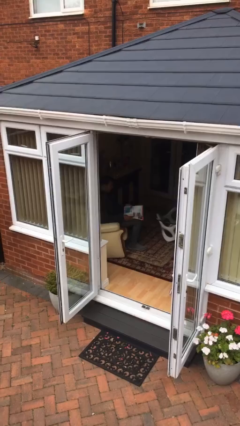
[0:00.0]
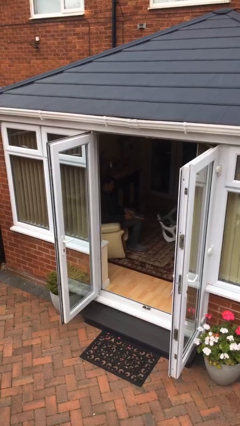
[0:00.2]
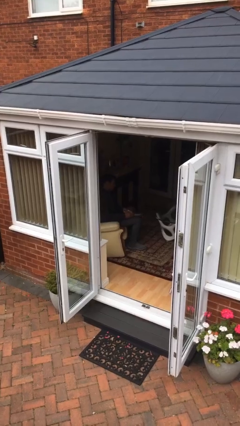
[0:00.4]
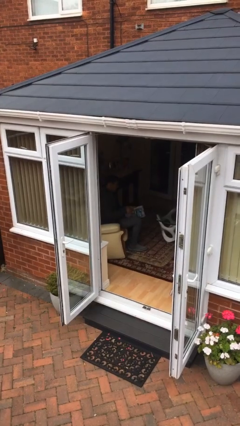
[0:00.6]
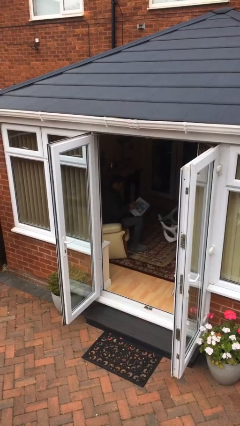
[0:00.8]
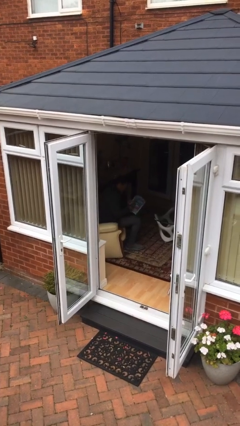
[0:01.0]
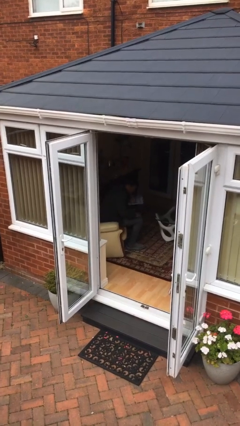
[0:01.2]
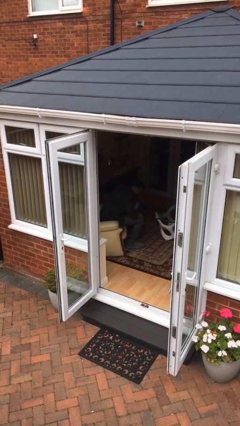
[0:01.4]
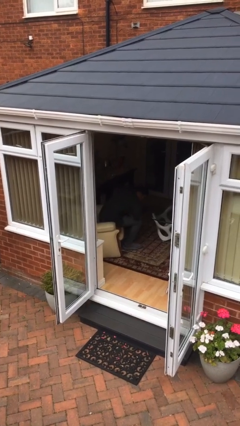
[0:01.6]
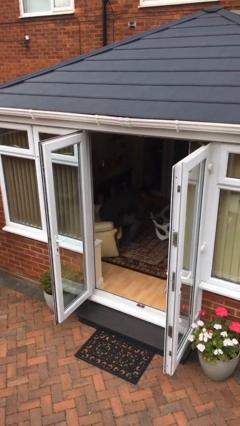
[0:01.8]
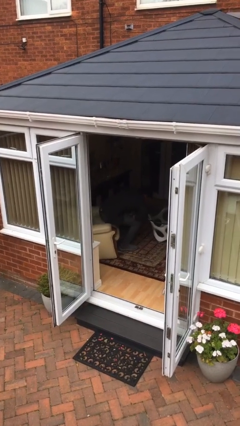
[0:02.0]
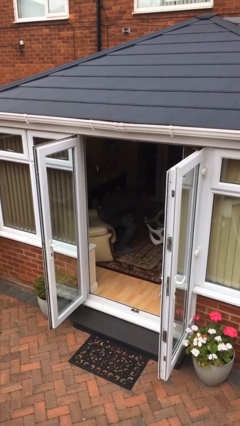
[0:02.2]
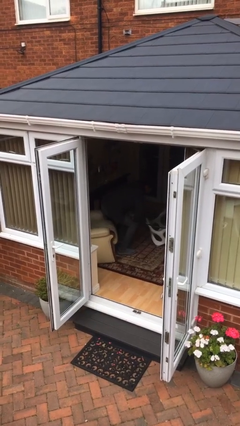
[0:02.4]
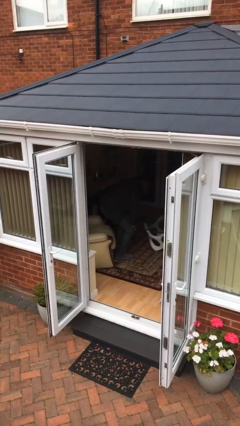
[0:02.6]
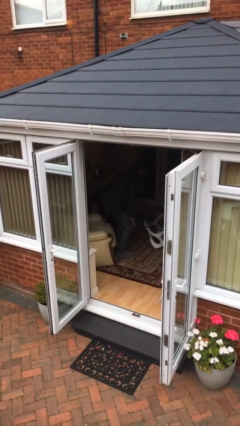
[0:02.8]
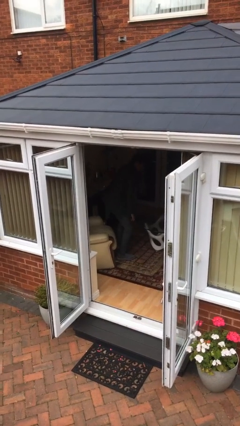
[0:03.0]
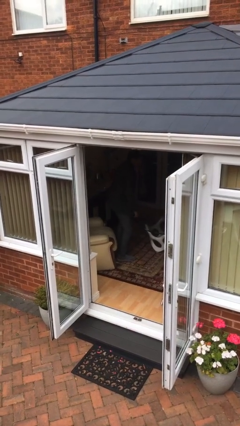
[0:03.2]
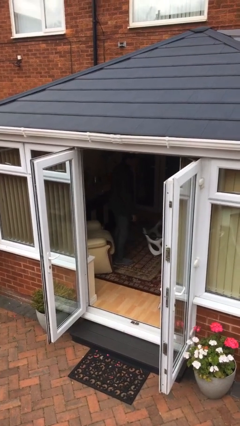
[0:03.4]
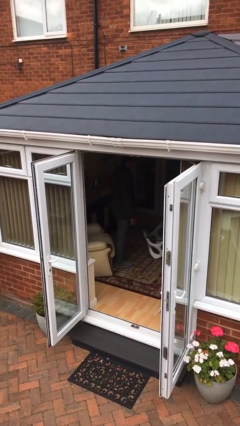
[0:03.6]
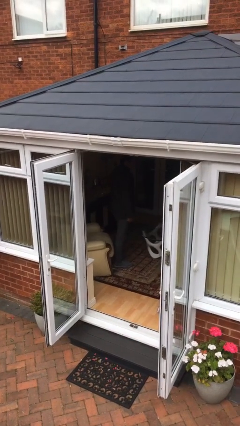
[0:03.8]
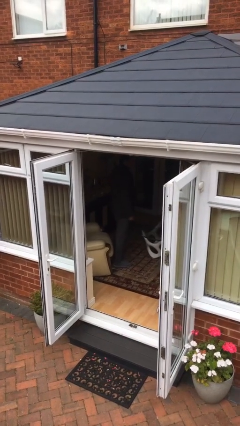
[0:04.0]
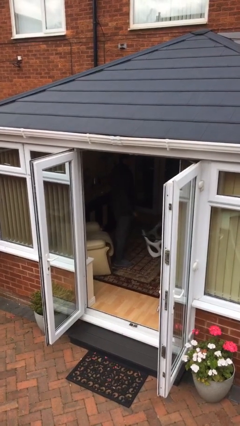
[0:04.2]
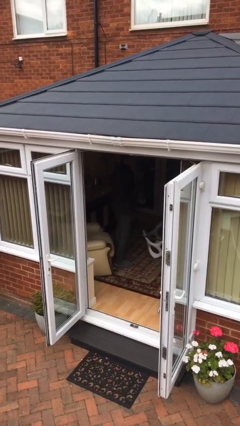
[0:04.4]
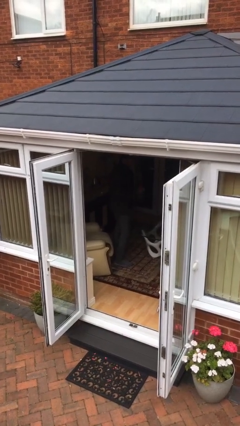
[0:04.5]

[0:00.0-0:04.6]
person stands up

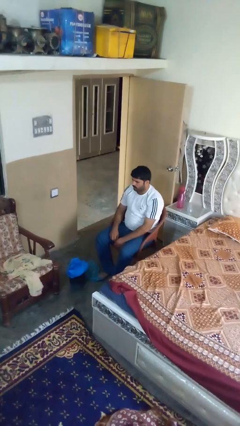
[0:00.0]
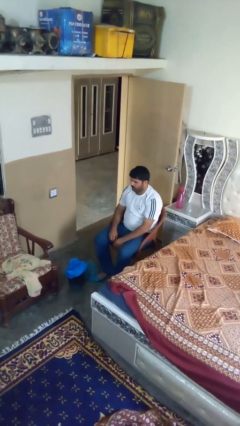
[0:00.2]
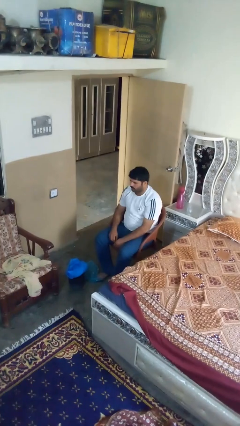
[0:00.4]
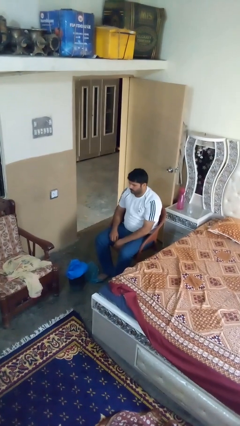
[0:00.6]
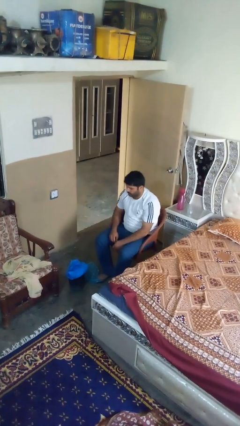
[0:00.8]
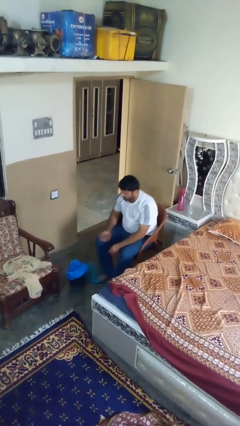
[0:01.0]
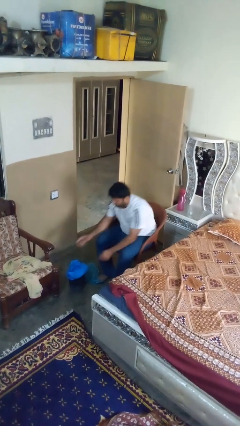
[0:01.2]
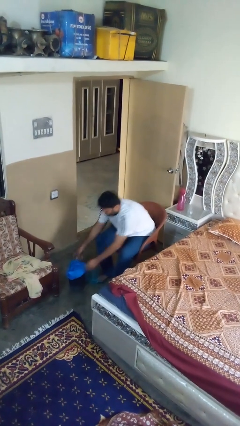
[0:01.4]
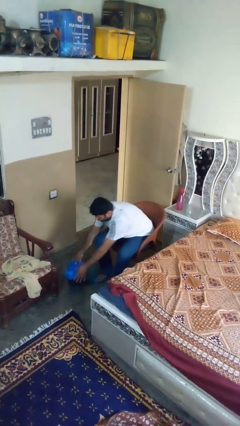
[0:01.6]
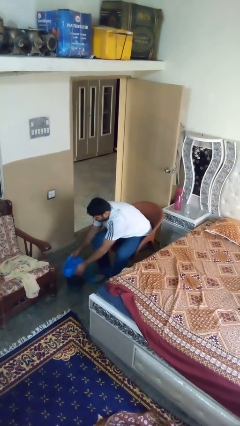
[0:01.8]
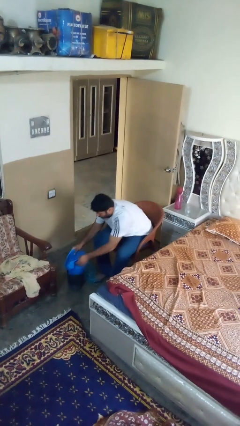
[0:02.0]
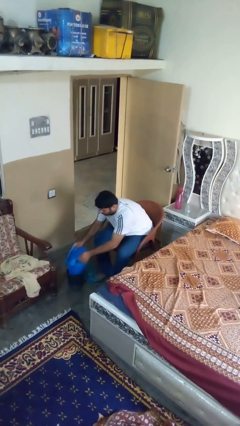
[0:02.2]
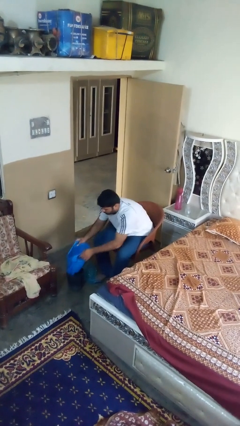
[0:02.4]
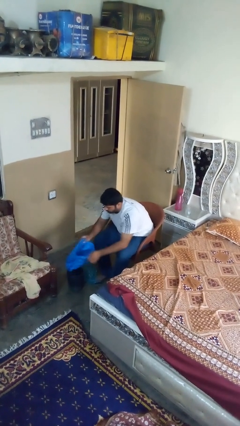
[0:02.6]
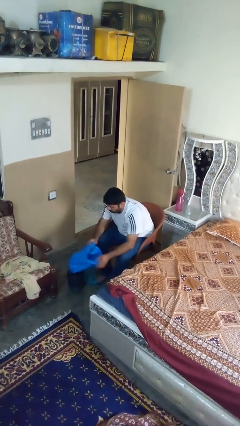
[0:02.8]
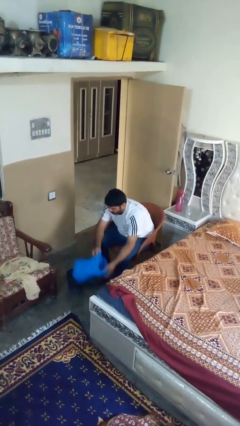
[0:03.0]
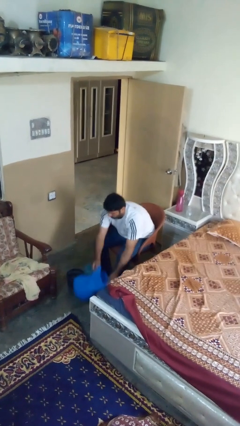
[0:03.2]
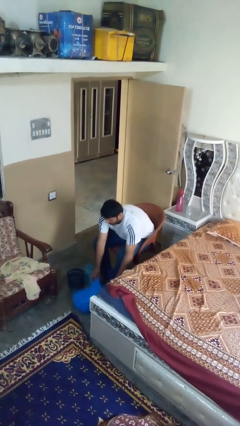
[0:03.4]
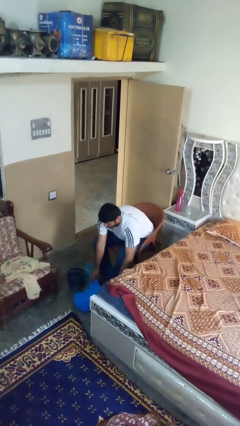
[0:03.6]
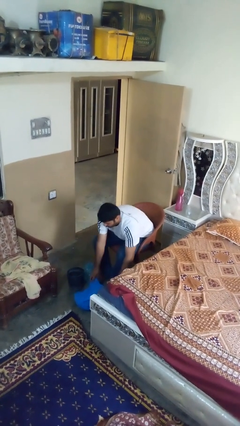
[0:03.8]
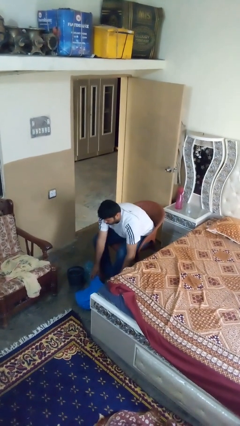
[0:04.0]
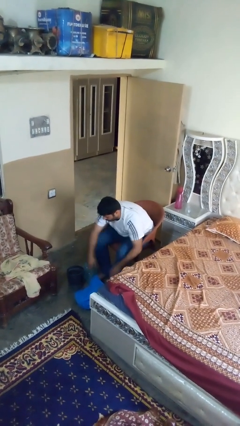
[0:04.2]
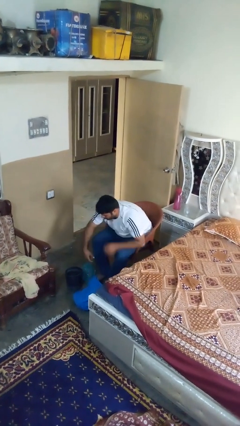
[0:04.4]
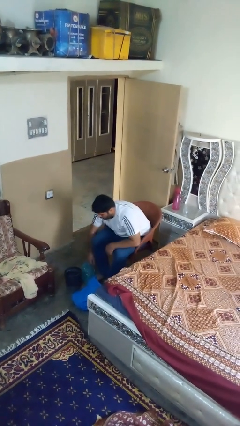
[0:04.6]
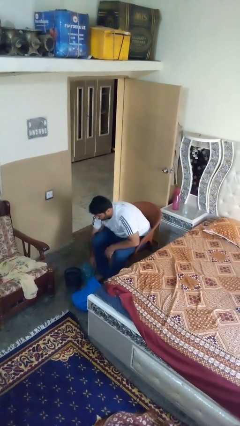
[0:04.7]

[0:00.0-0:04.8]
person removes trashbag from trashcan

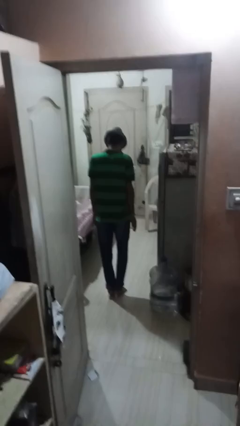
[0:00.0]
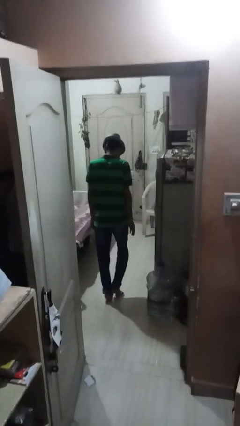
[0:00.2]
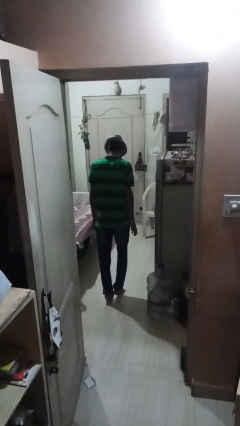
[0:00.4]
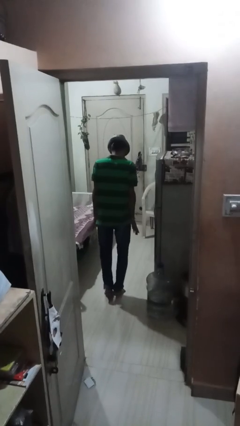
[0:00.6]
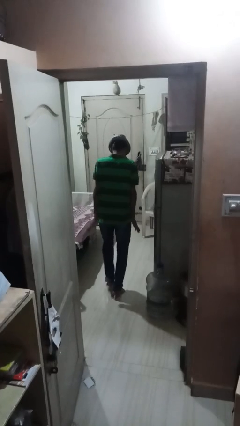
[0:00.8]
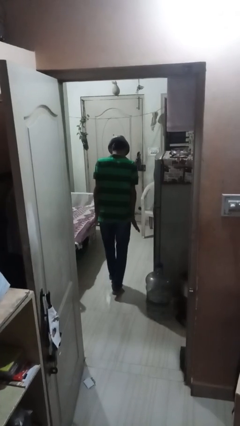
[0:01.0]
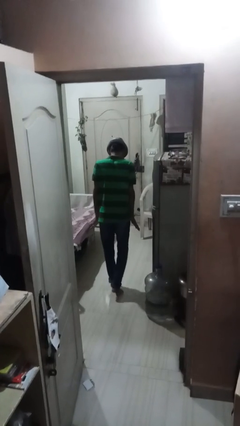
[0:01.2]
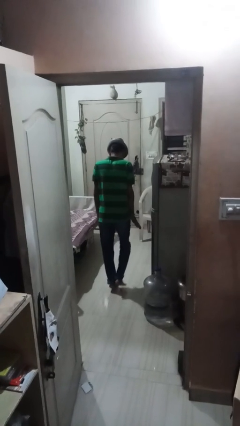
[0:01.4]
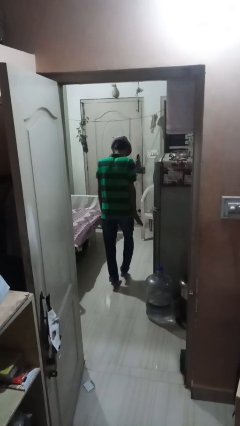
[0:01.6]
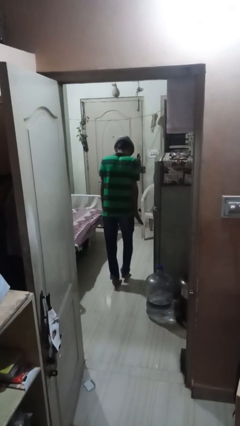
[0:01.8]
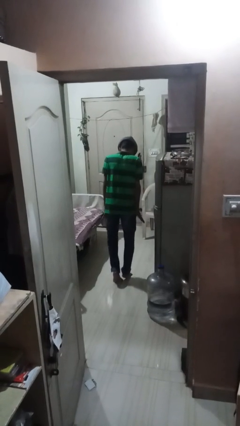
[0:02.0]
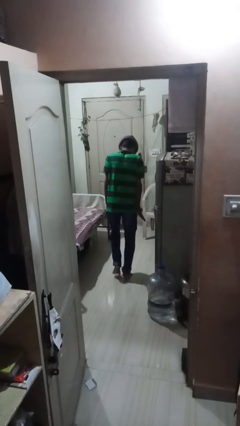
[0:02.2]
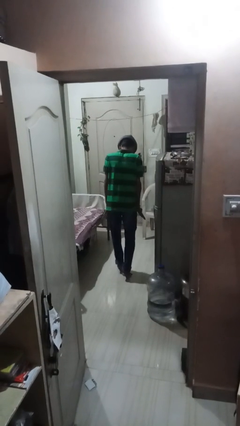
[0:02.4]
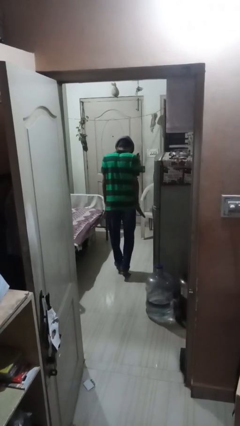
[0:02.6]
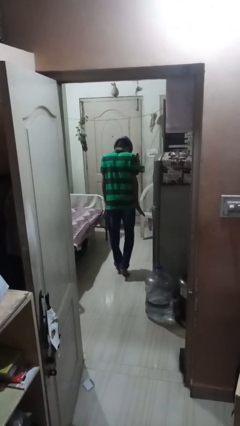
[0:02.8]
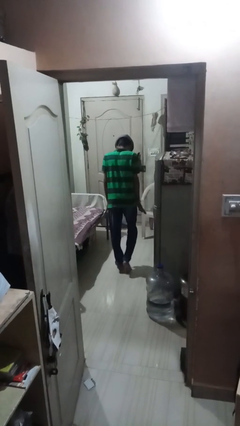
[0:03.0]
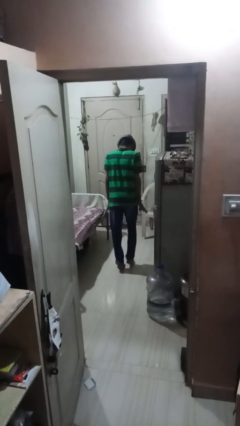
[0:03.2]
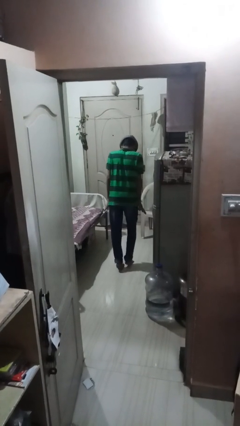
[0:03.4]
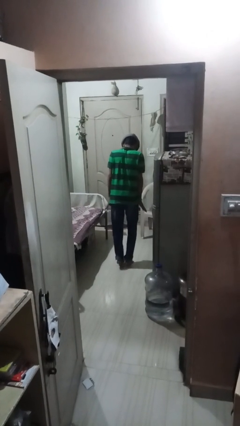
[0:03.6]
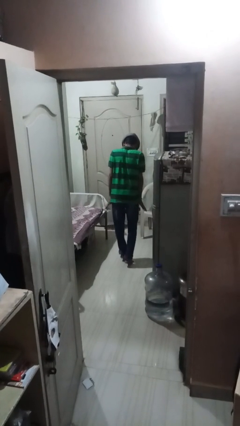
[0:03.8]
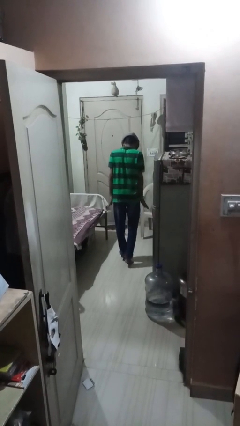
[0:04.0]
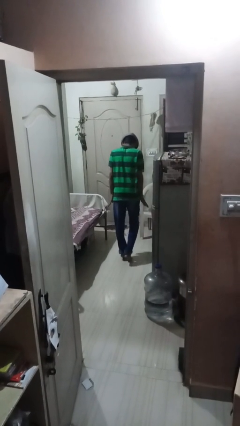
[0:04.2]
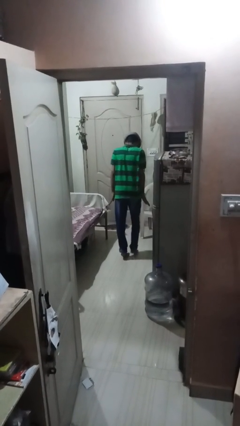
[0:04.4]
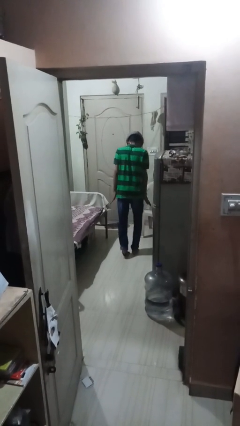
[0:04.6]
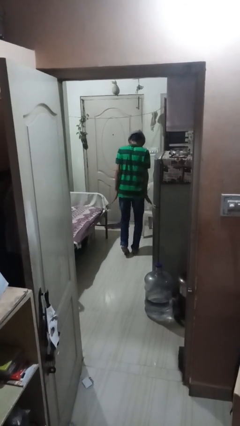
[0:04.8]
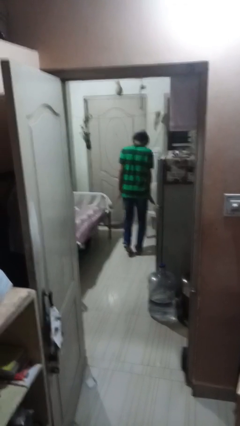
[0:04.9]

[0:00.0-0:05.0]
person walks tiptoe

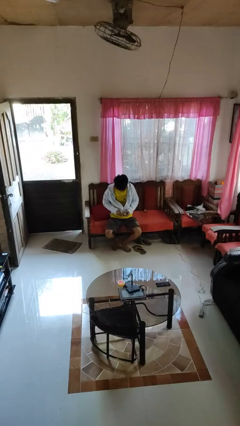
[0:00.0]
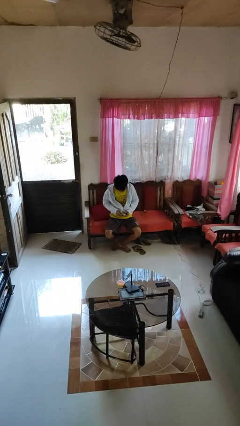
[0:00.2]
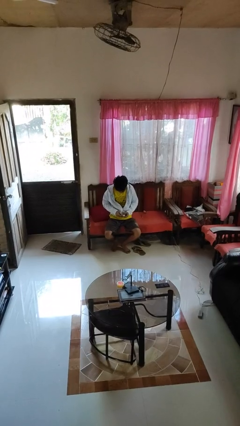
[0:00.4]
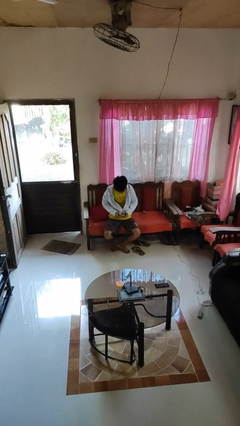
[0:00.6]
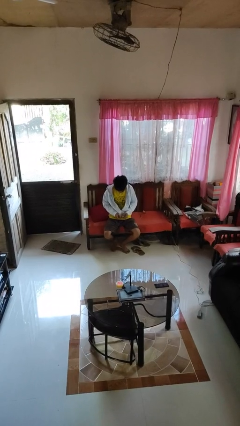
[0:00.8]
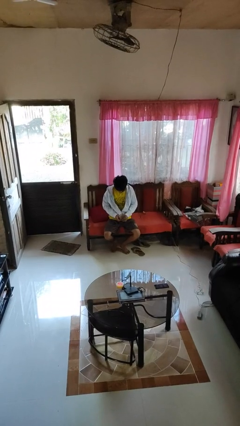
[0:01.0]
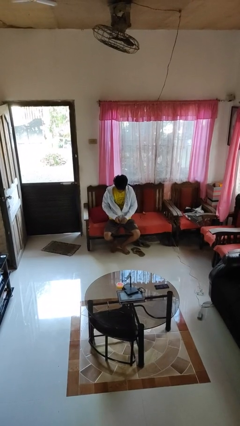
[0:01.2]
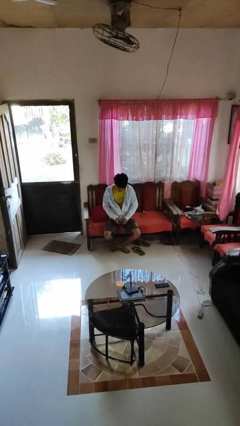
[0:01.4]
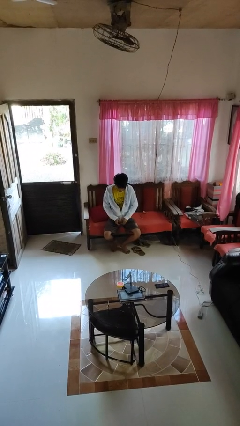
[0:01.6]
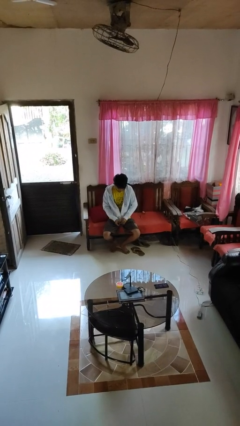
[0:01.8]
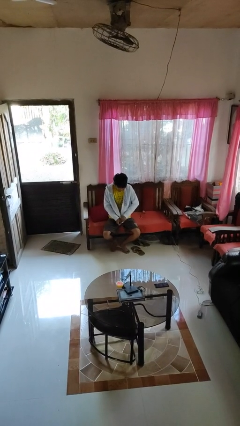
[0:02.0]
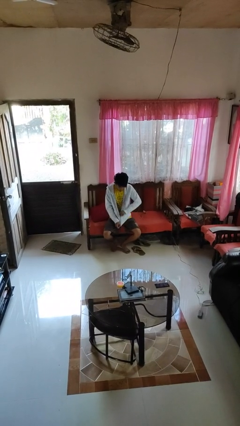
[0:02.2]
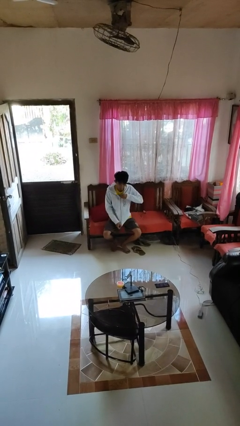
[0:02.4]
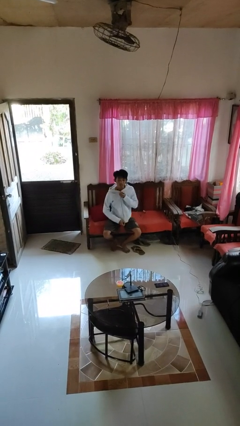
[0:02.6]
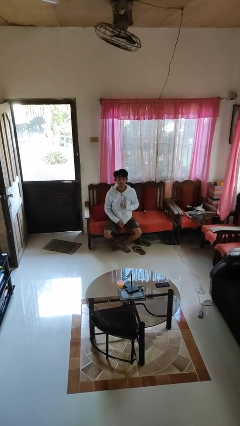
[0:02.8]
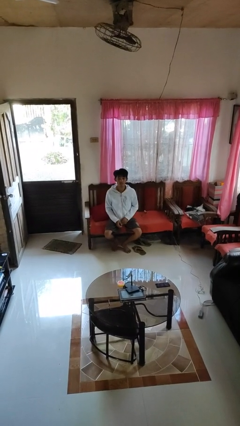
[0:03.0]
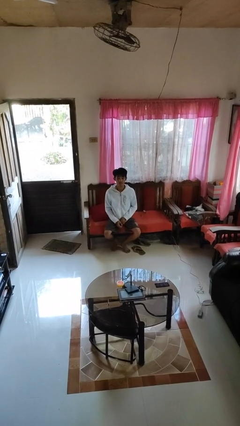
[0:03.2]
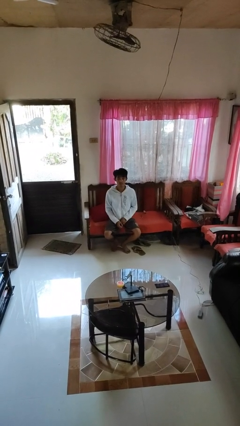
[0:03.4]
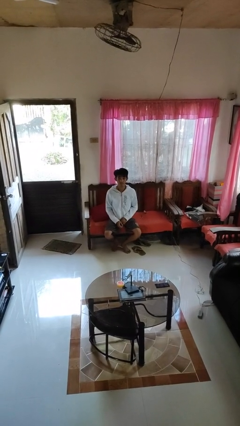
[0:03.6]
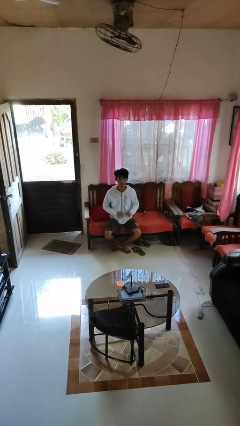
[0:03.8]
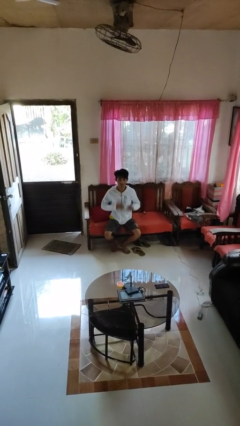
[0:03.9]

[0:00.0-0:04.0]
person zips up jacket
